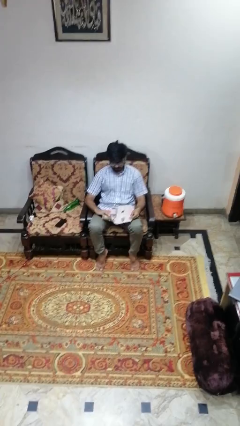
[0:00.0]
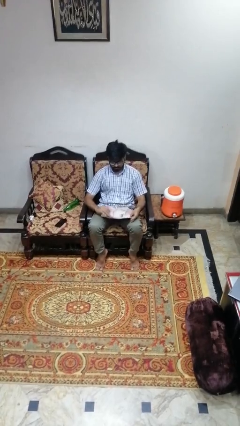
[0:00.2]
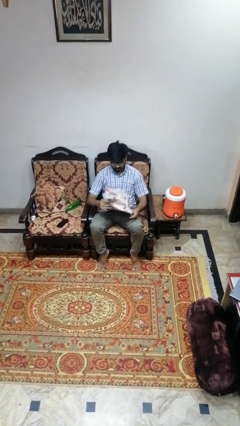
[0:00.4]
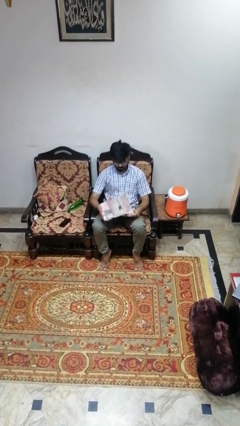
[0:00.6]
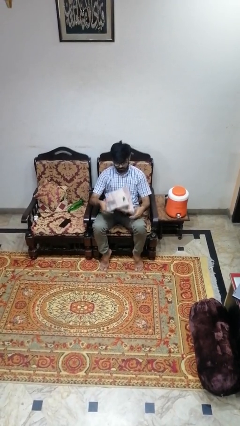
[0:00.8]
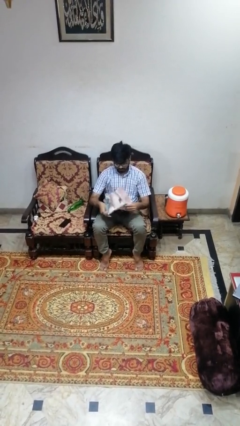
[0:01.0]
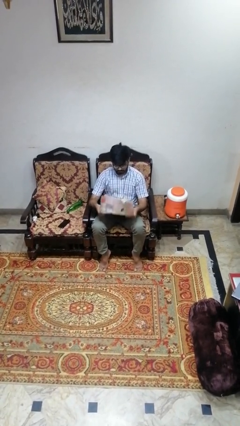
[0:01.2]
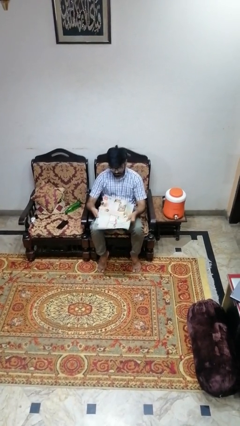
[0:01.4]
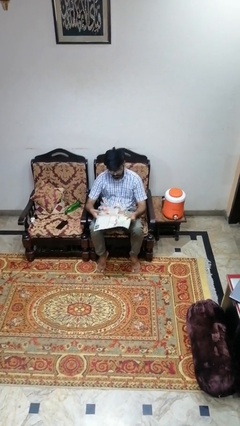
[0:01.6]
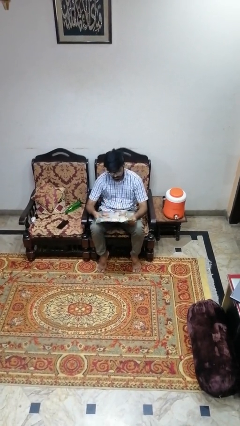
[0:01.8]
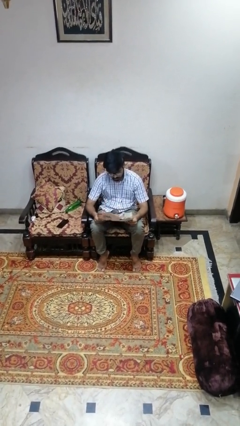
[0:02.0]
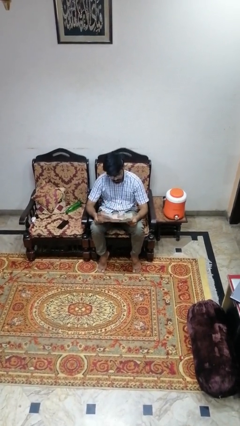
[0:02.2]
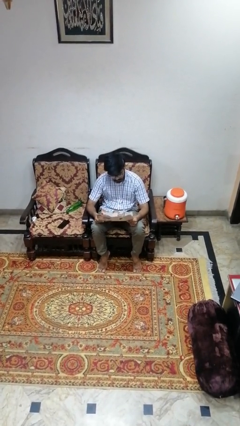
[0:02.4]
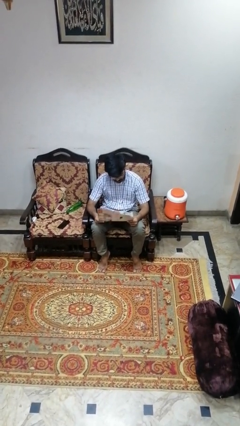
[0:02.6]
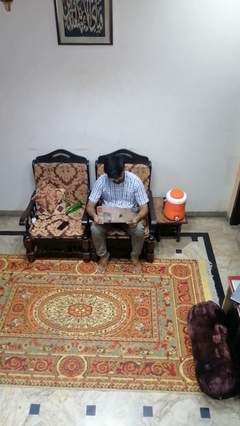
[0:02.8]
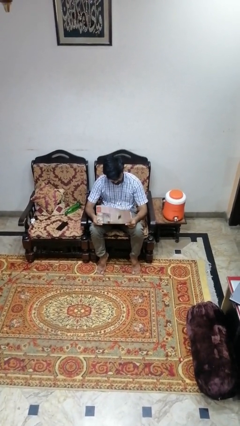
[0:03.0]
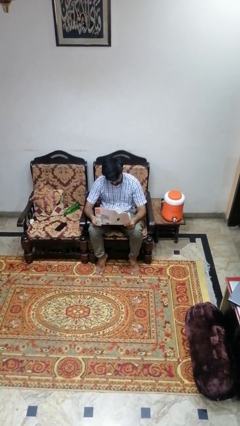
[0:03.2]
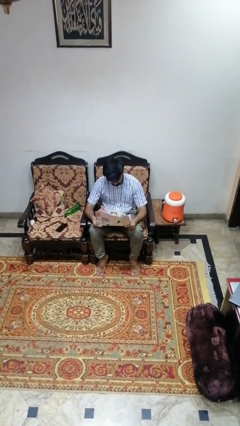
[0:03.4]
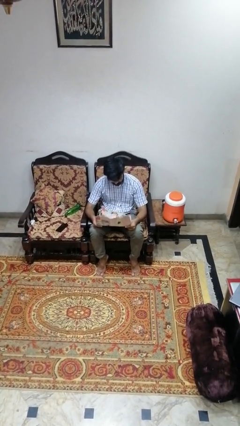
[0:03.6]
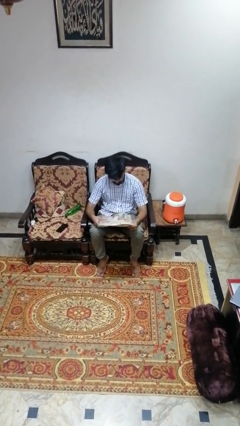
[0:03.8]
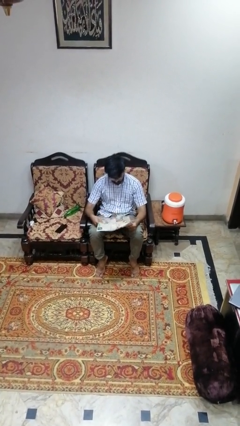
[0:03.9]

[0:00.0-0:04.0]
person reads newspaper

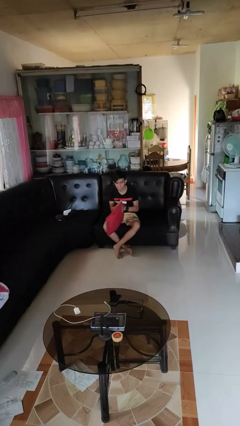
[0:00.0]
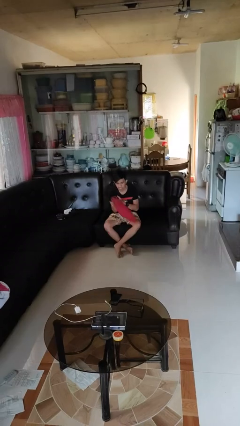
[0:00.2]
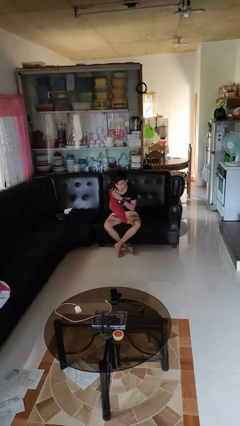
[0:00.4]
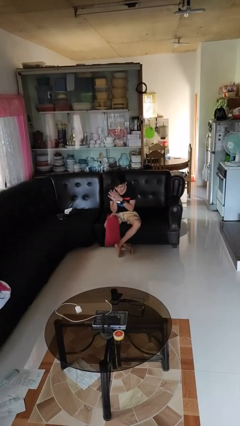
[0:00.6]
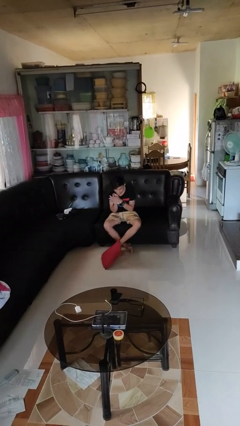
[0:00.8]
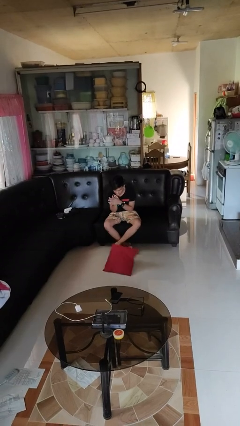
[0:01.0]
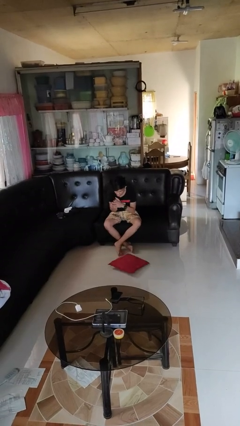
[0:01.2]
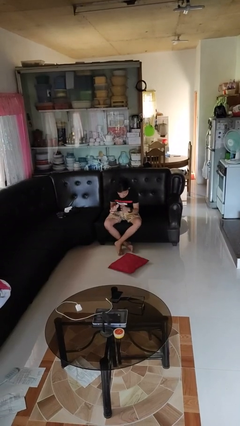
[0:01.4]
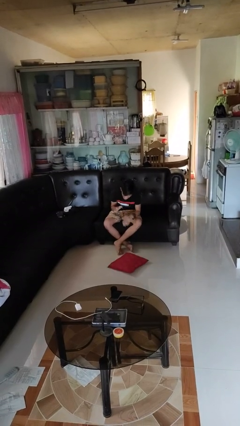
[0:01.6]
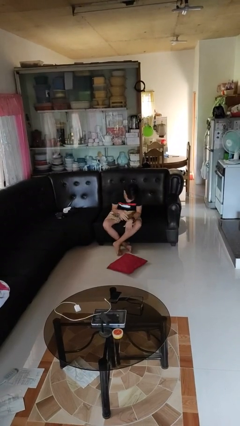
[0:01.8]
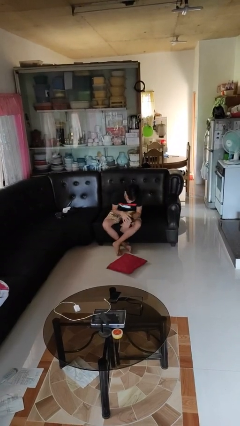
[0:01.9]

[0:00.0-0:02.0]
person drops object

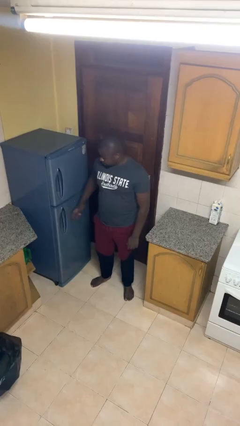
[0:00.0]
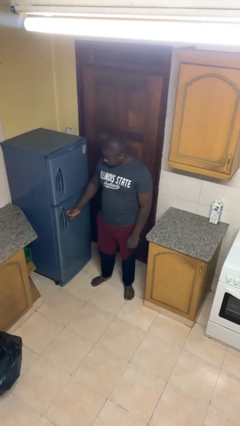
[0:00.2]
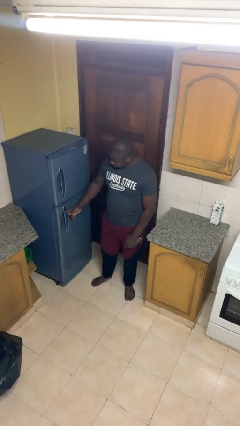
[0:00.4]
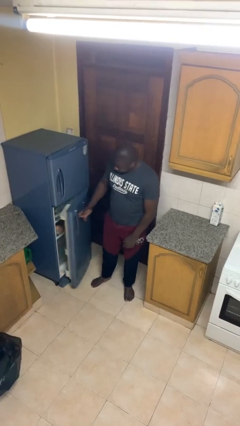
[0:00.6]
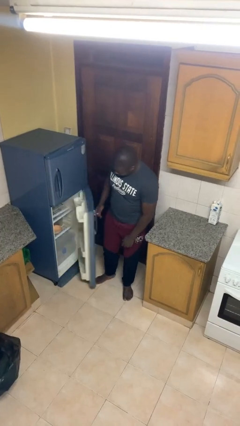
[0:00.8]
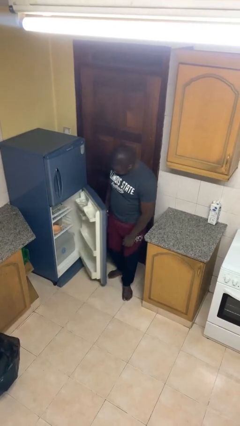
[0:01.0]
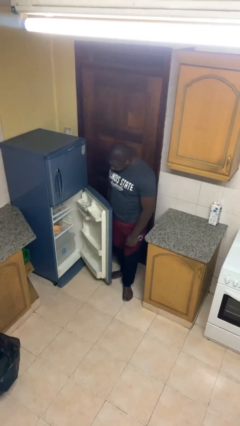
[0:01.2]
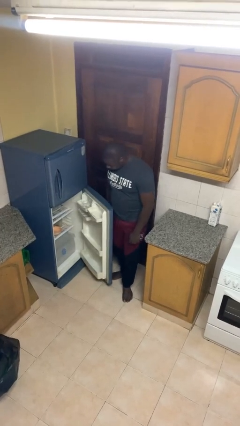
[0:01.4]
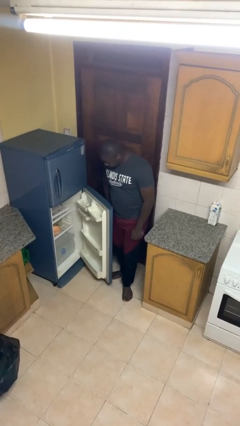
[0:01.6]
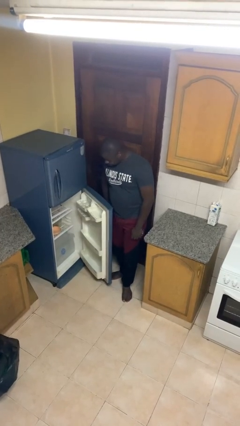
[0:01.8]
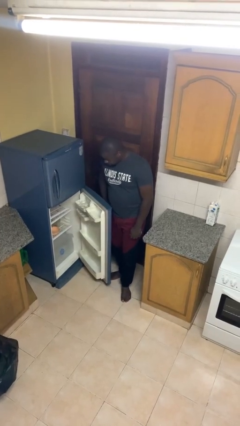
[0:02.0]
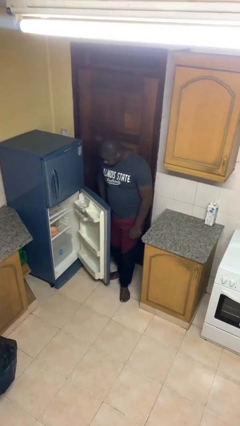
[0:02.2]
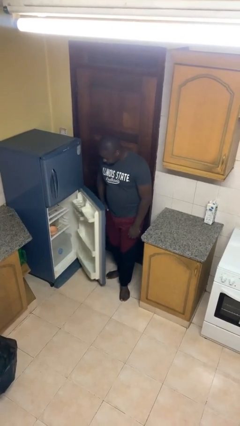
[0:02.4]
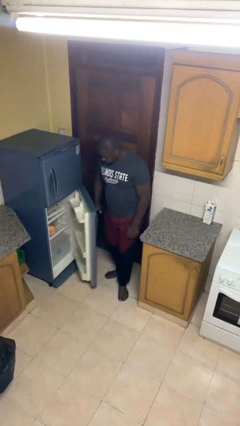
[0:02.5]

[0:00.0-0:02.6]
person opens refrigerator

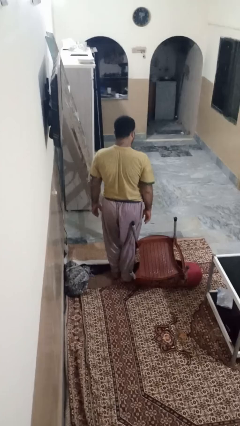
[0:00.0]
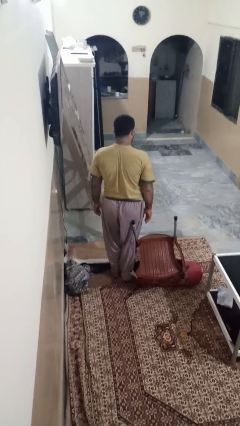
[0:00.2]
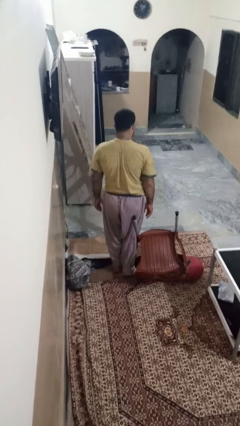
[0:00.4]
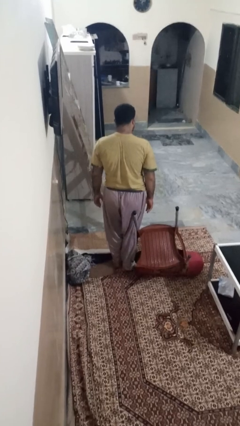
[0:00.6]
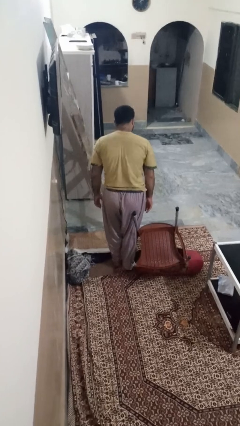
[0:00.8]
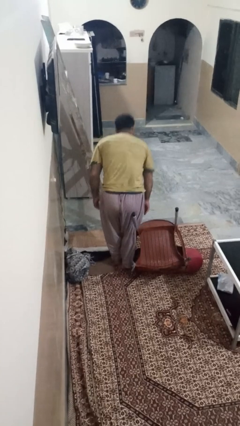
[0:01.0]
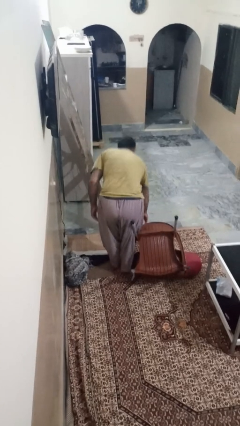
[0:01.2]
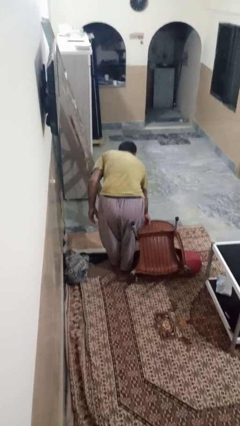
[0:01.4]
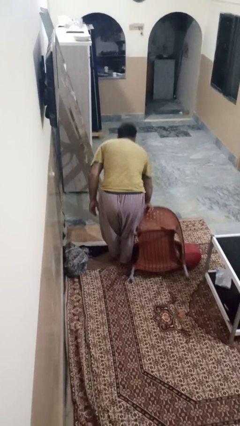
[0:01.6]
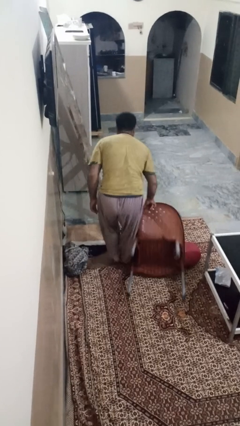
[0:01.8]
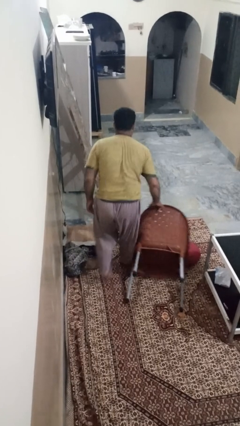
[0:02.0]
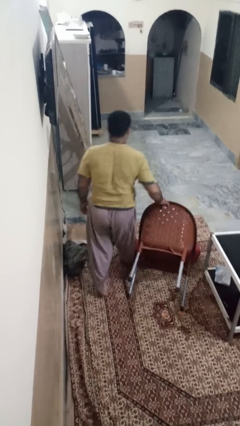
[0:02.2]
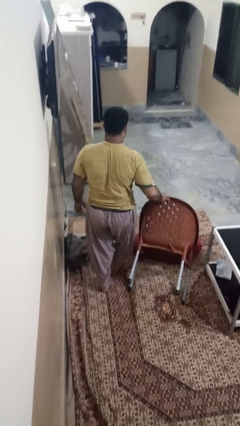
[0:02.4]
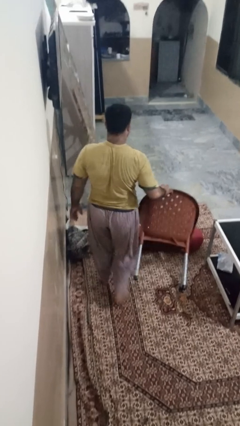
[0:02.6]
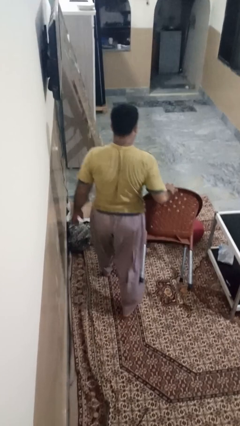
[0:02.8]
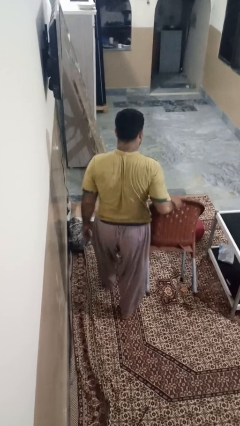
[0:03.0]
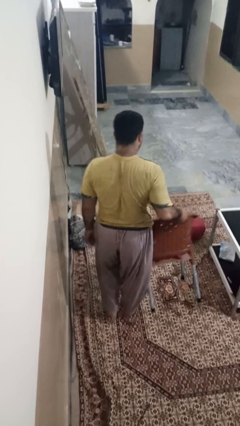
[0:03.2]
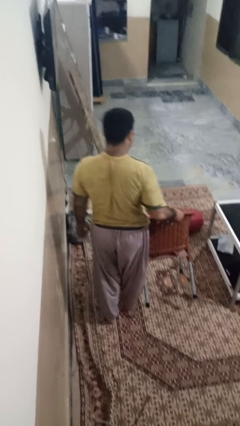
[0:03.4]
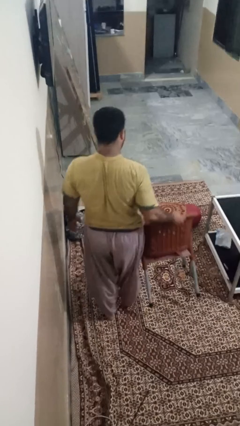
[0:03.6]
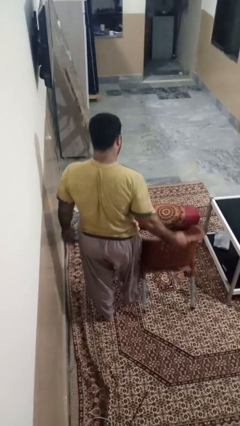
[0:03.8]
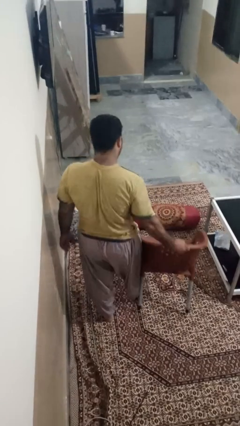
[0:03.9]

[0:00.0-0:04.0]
person sets upright furniture

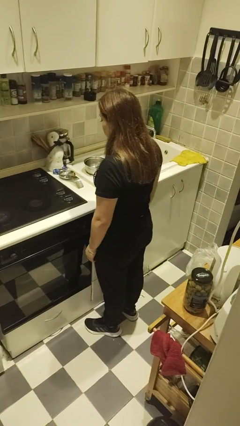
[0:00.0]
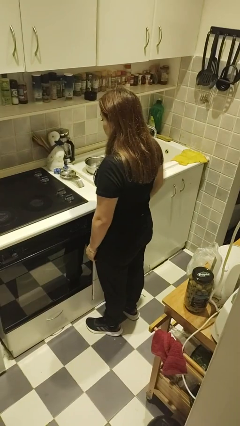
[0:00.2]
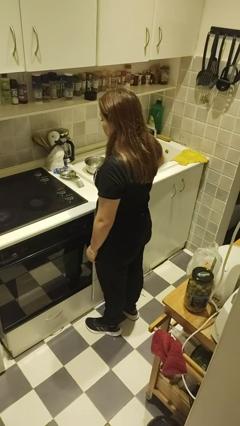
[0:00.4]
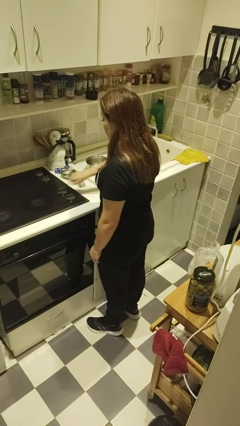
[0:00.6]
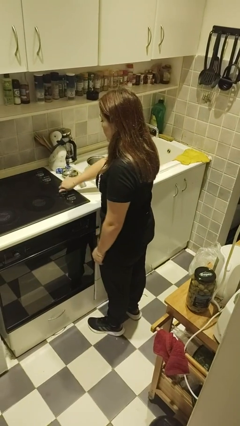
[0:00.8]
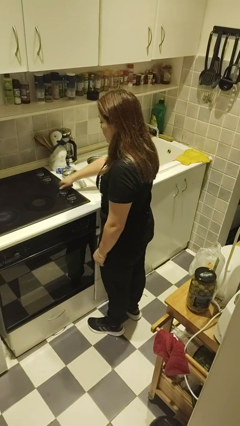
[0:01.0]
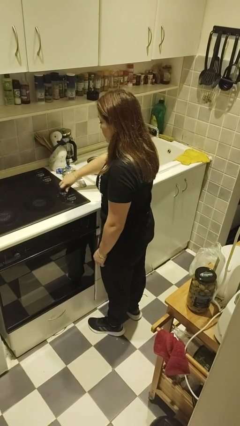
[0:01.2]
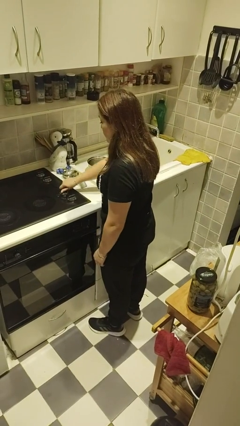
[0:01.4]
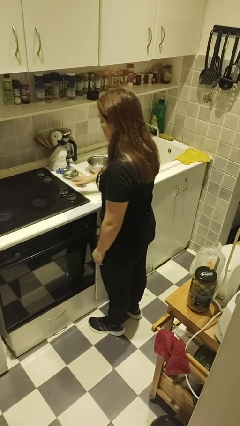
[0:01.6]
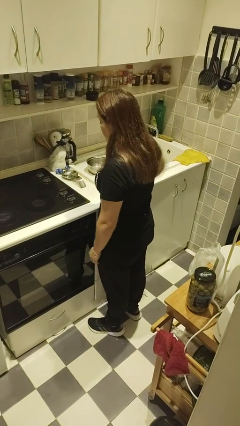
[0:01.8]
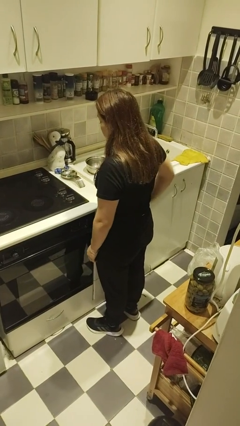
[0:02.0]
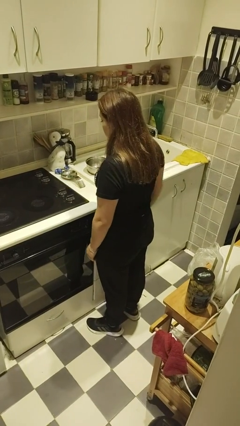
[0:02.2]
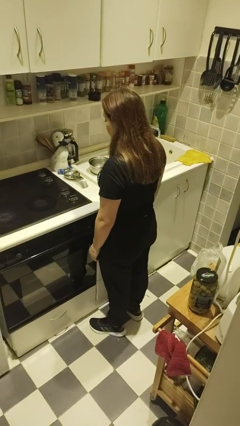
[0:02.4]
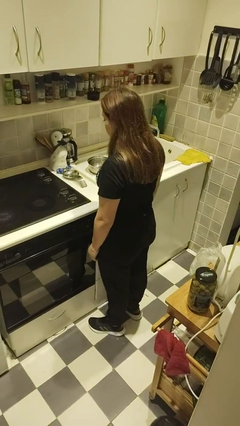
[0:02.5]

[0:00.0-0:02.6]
person turns on stovetop

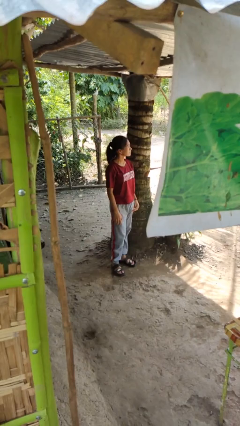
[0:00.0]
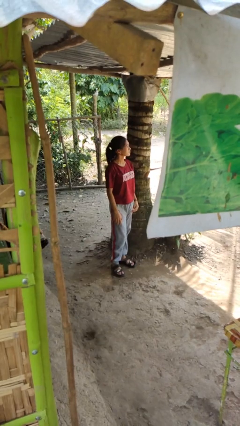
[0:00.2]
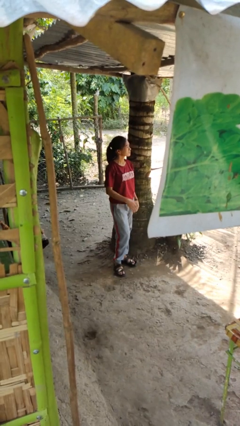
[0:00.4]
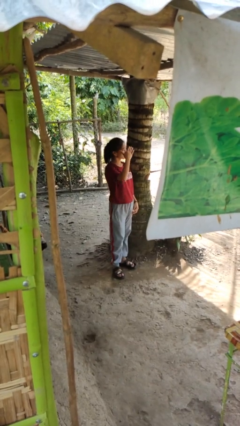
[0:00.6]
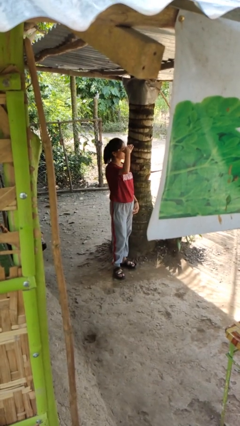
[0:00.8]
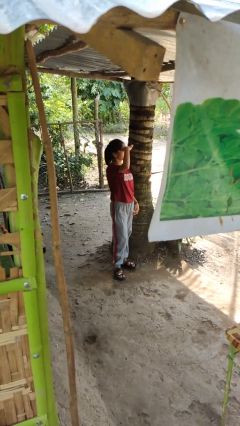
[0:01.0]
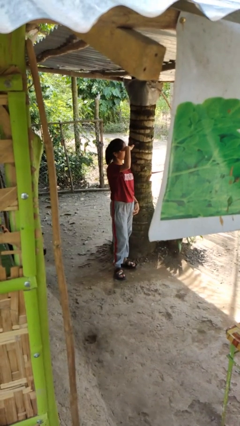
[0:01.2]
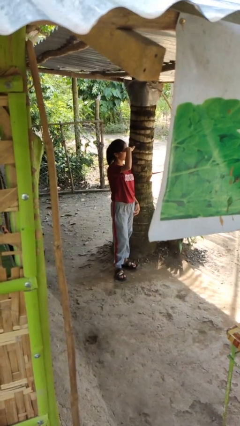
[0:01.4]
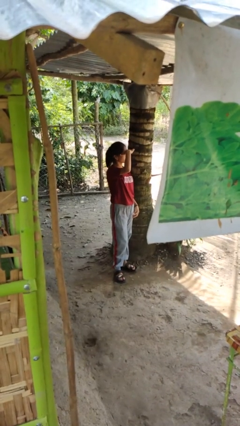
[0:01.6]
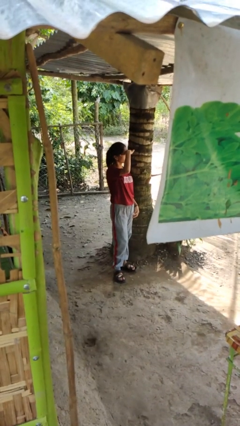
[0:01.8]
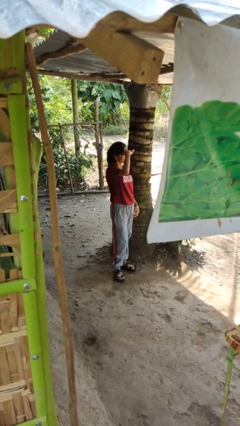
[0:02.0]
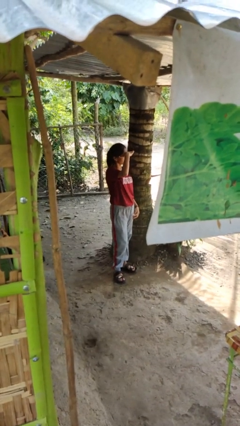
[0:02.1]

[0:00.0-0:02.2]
person shades eyes

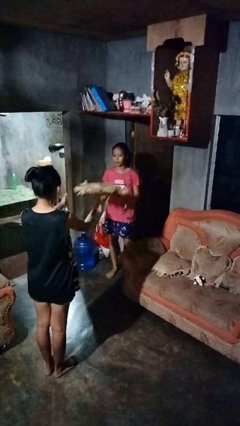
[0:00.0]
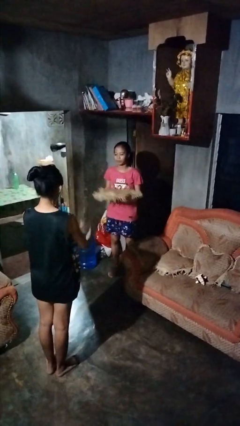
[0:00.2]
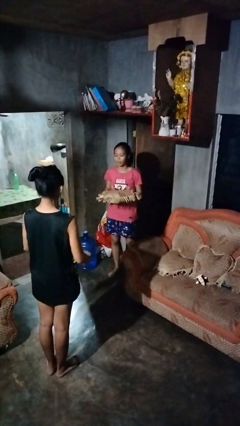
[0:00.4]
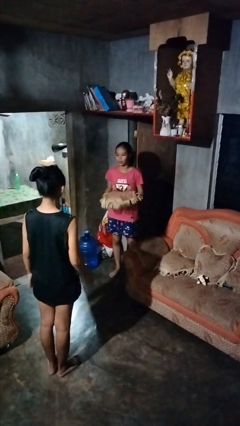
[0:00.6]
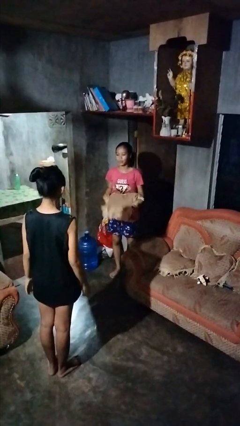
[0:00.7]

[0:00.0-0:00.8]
person catches object from person
